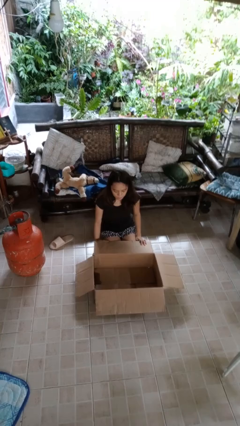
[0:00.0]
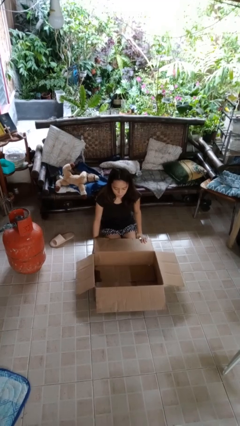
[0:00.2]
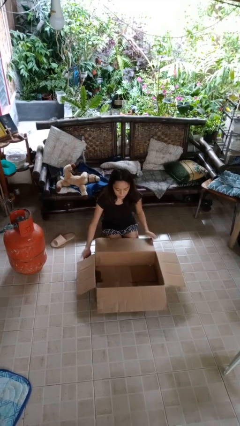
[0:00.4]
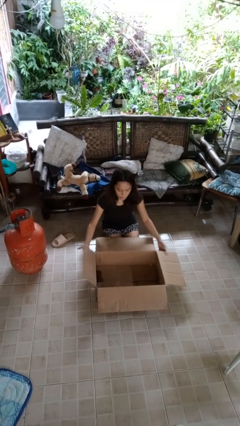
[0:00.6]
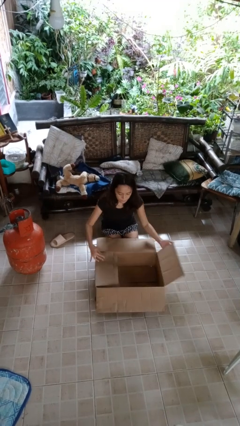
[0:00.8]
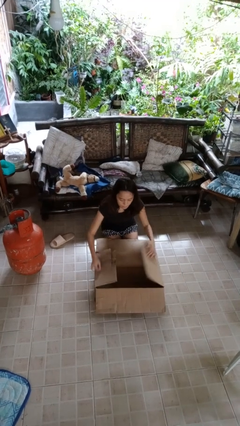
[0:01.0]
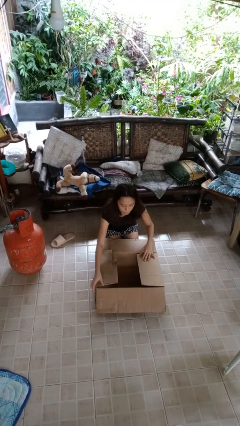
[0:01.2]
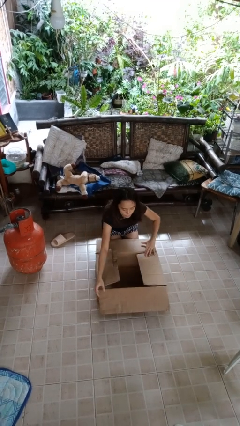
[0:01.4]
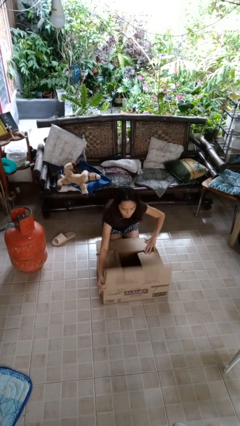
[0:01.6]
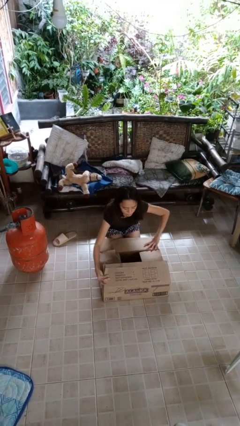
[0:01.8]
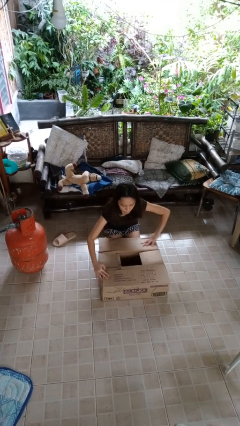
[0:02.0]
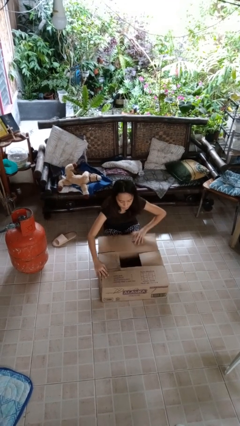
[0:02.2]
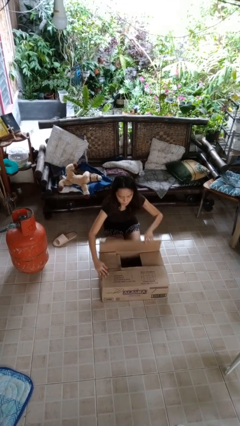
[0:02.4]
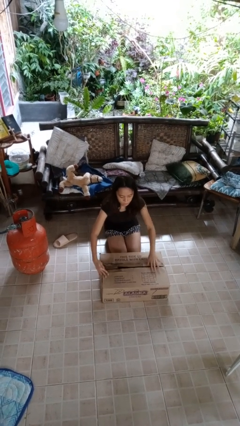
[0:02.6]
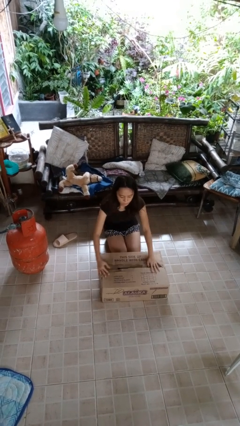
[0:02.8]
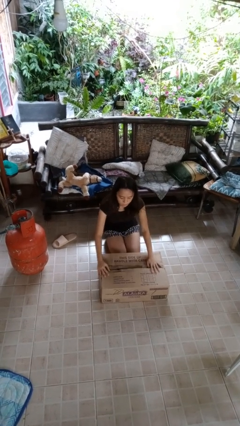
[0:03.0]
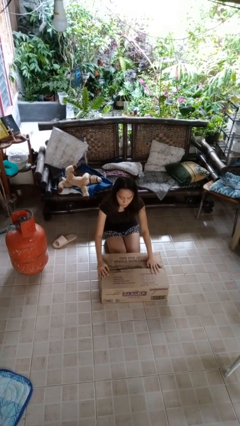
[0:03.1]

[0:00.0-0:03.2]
person closes box

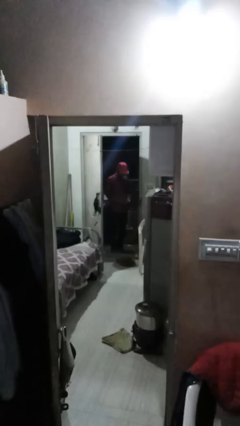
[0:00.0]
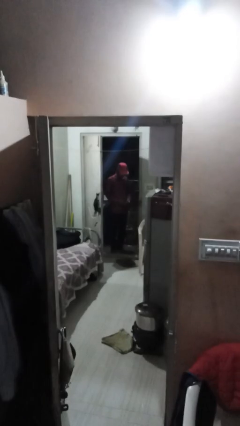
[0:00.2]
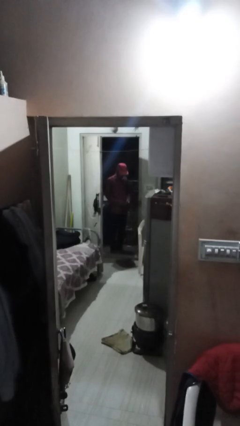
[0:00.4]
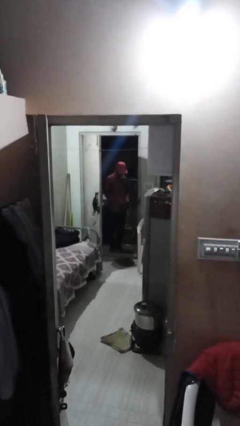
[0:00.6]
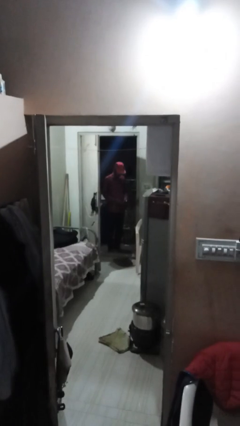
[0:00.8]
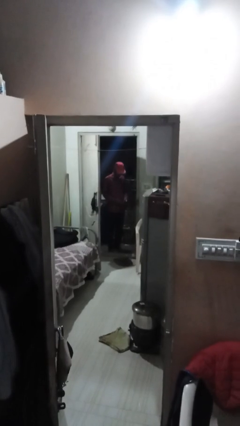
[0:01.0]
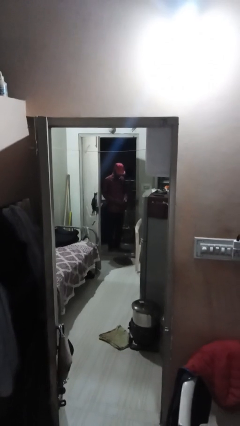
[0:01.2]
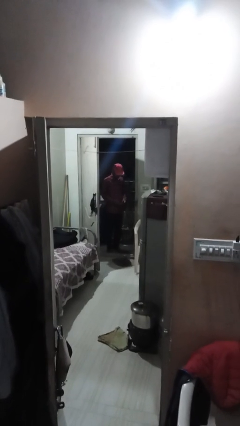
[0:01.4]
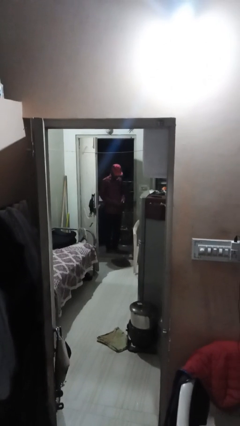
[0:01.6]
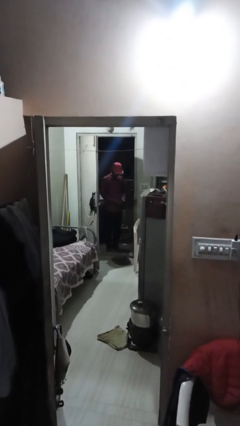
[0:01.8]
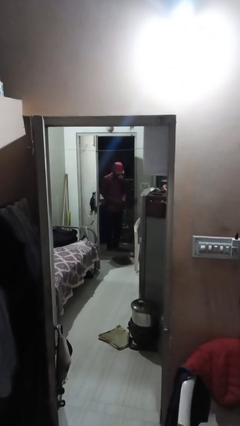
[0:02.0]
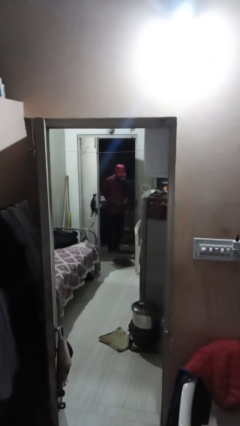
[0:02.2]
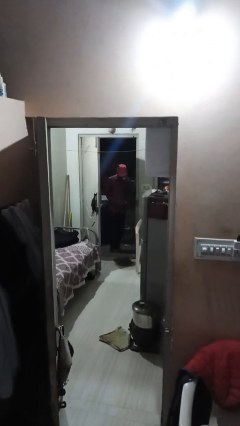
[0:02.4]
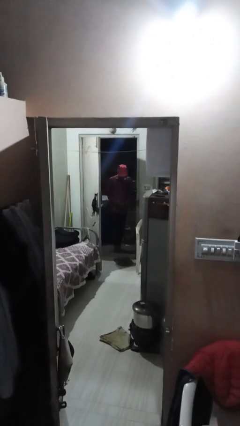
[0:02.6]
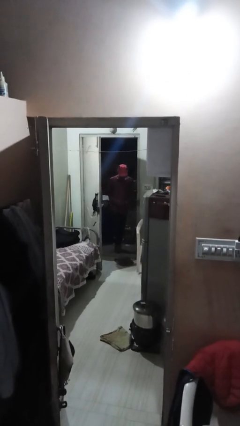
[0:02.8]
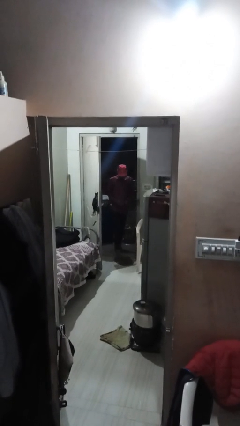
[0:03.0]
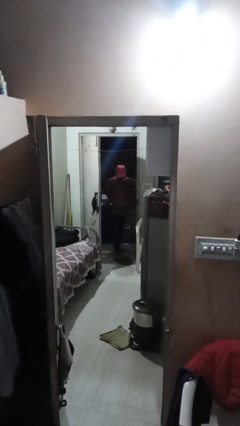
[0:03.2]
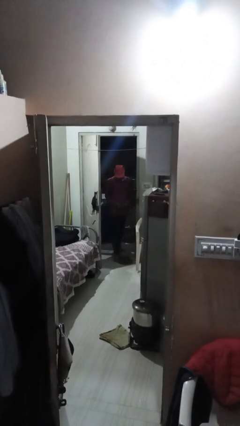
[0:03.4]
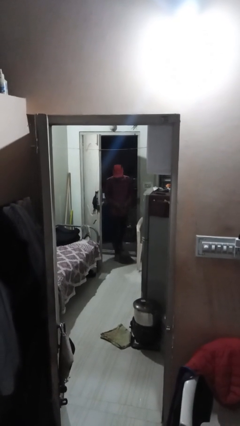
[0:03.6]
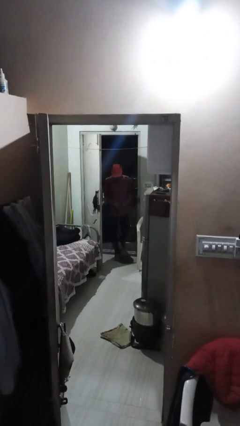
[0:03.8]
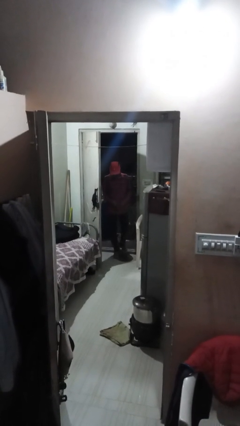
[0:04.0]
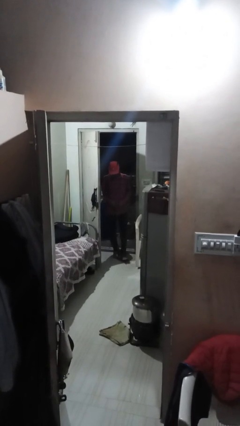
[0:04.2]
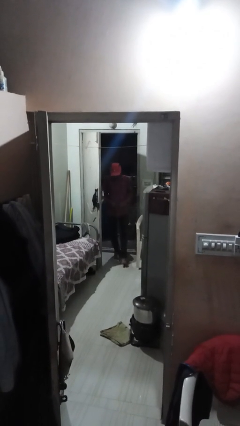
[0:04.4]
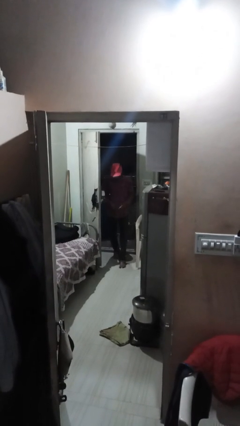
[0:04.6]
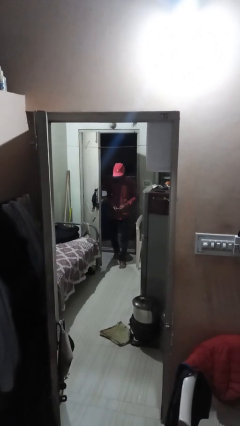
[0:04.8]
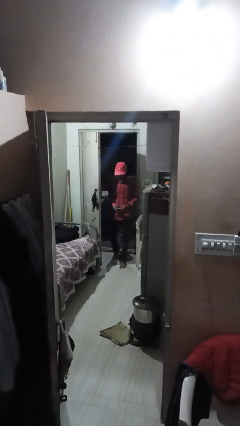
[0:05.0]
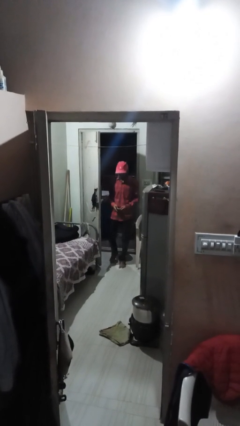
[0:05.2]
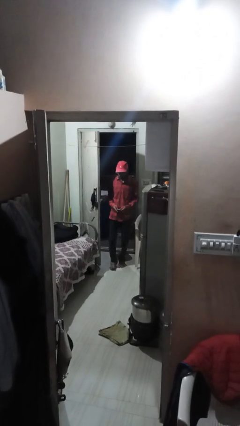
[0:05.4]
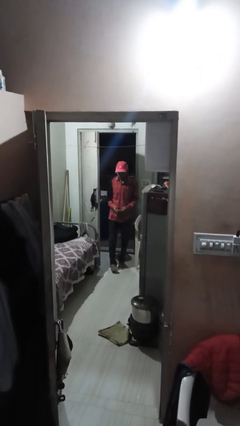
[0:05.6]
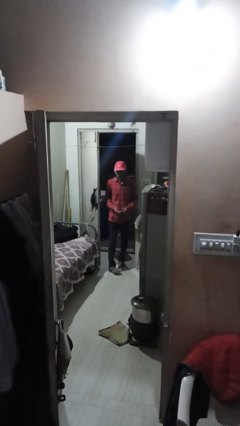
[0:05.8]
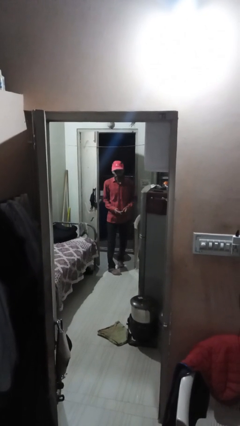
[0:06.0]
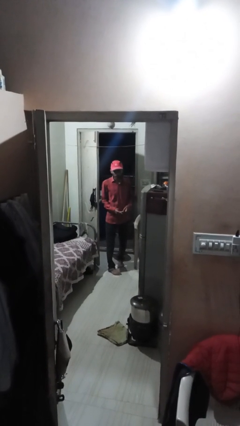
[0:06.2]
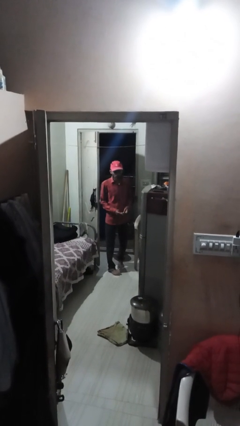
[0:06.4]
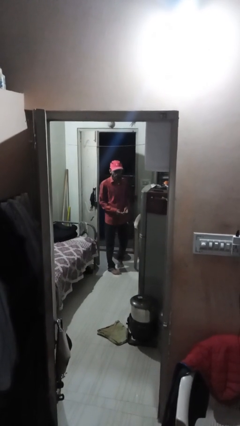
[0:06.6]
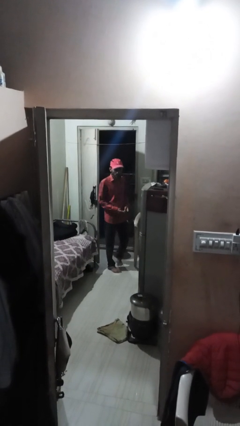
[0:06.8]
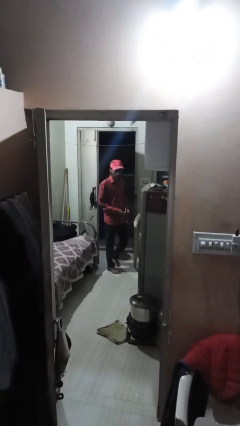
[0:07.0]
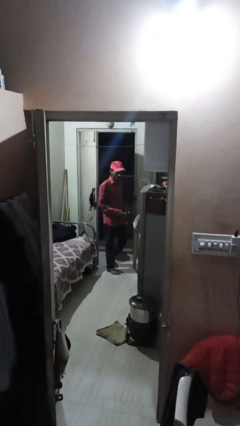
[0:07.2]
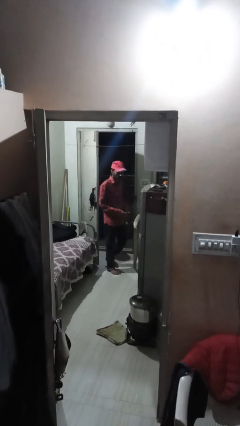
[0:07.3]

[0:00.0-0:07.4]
person enters scene through structure

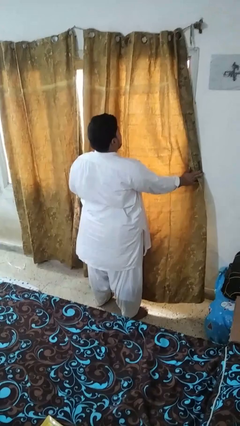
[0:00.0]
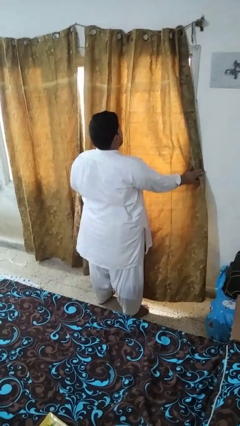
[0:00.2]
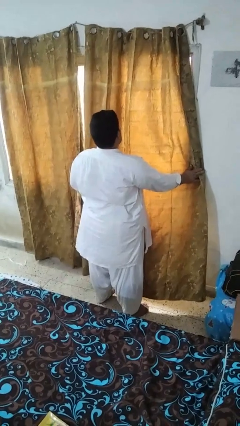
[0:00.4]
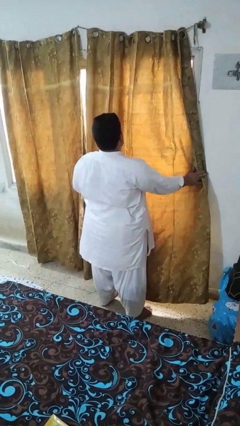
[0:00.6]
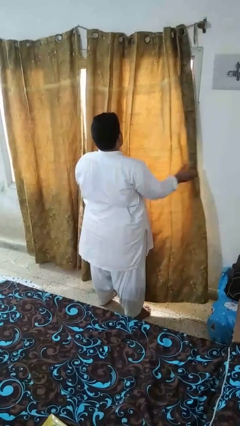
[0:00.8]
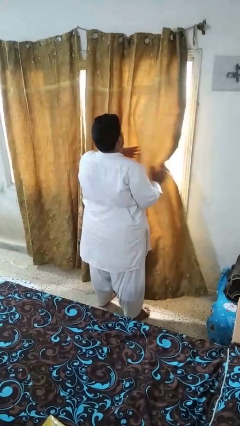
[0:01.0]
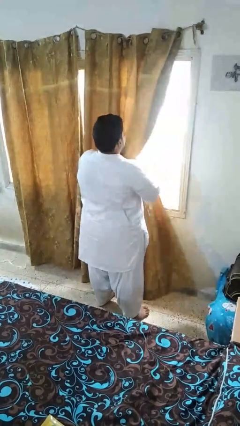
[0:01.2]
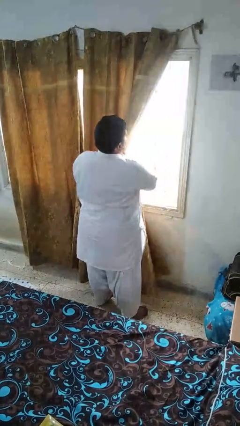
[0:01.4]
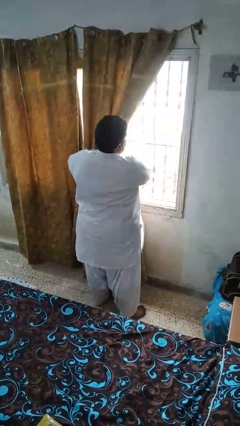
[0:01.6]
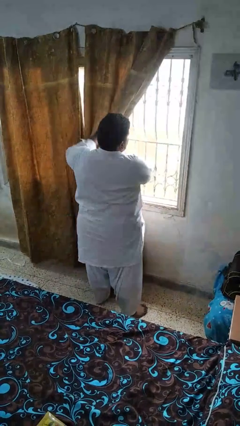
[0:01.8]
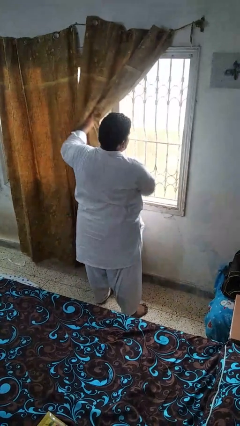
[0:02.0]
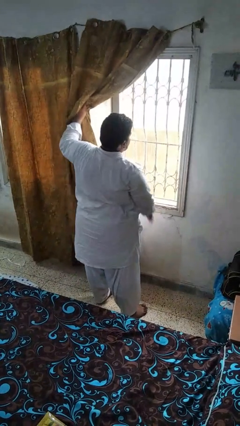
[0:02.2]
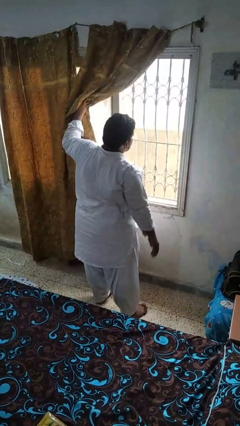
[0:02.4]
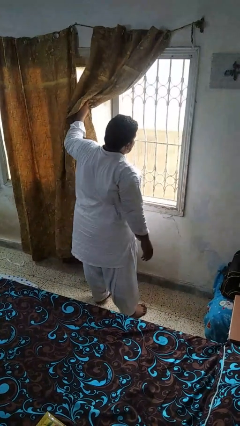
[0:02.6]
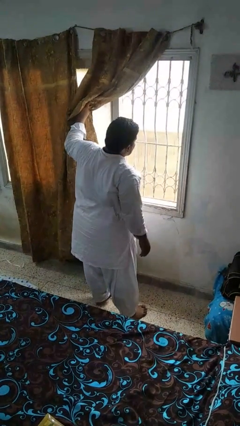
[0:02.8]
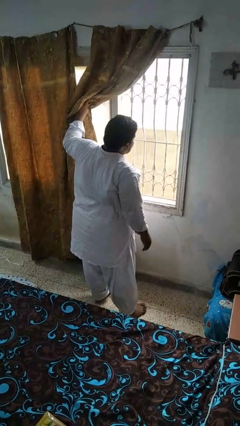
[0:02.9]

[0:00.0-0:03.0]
person opens curtains

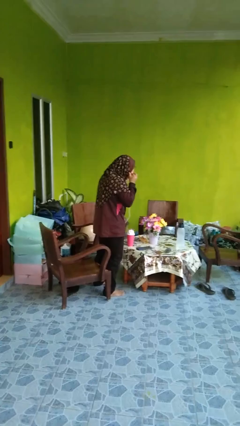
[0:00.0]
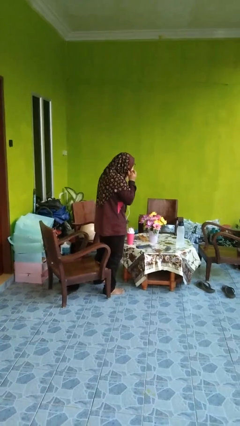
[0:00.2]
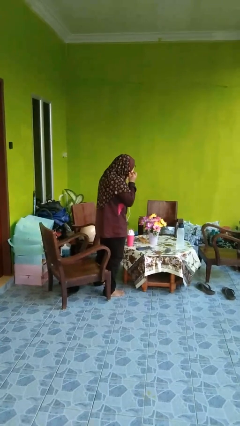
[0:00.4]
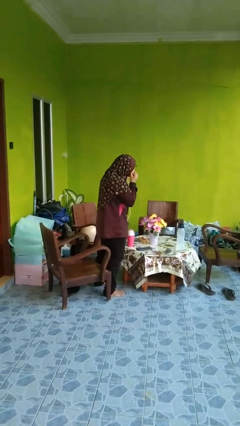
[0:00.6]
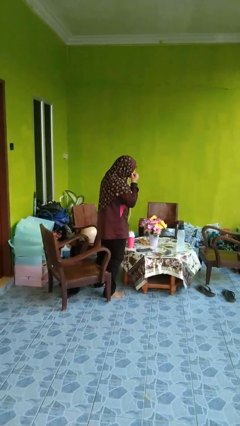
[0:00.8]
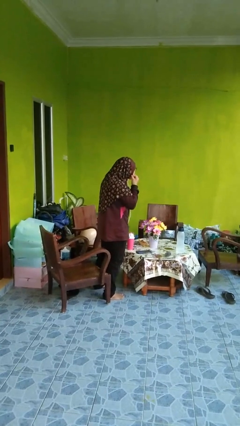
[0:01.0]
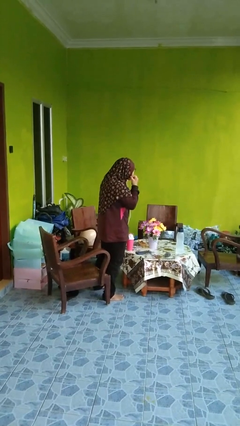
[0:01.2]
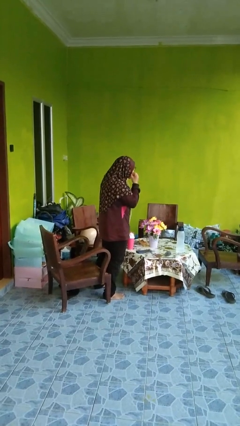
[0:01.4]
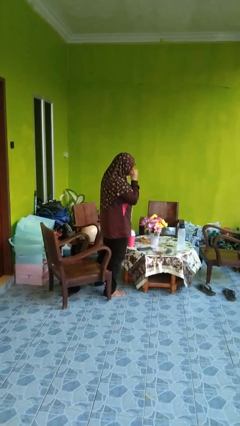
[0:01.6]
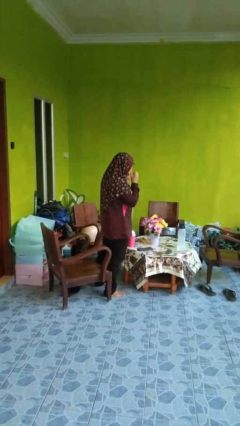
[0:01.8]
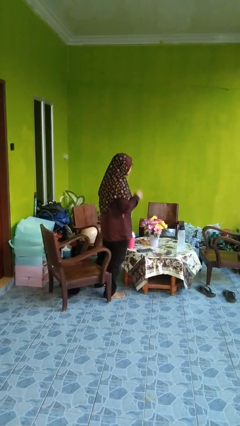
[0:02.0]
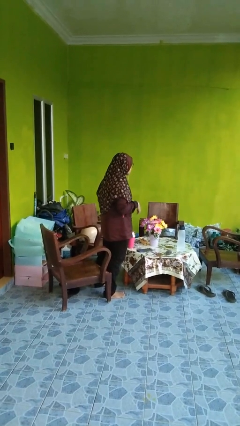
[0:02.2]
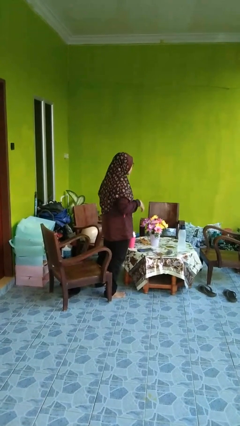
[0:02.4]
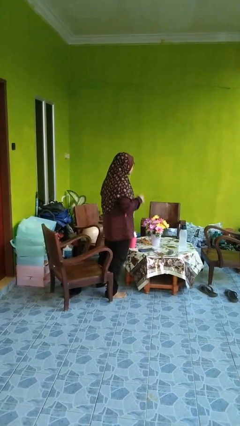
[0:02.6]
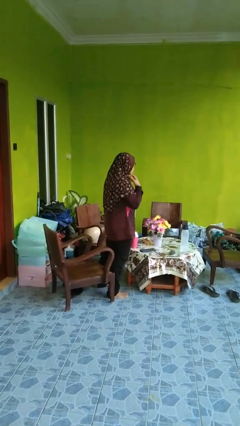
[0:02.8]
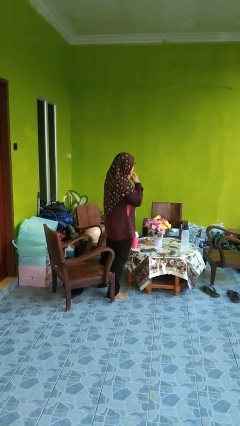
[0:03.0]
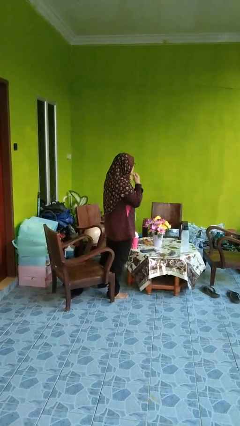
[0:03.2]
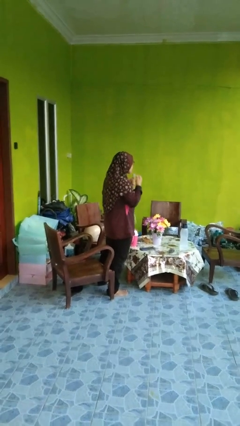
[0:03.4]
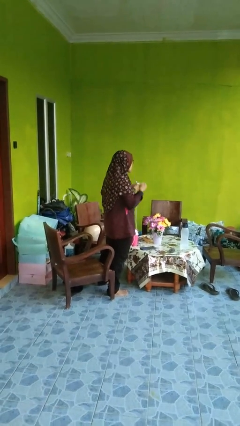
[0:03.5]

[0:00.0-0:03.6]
person puts on headphones

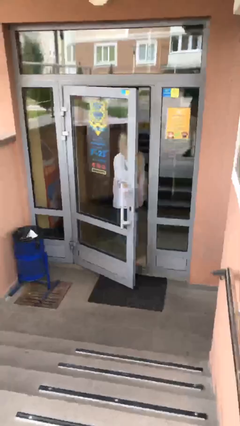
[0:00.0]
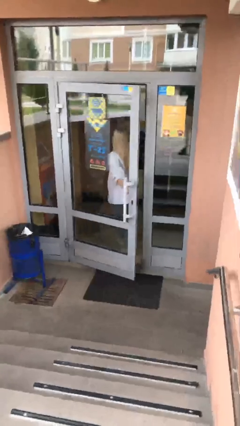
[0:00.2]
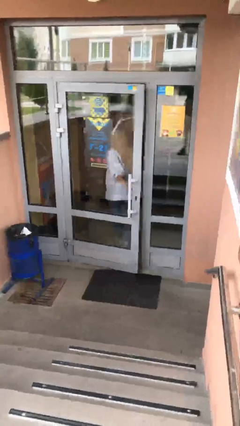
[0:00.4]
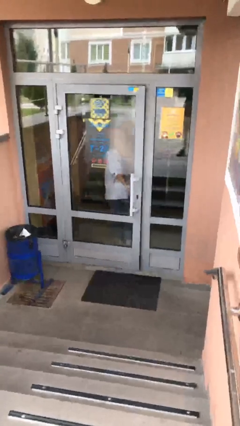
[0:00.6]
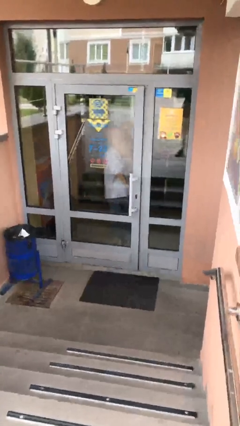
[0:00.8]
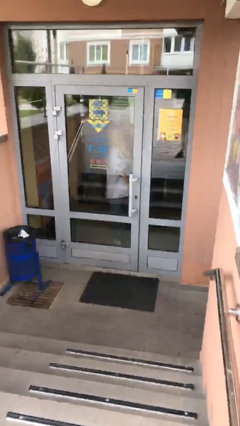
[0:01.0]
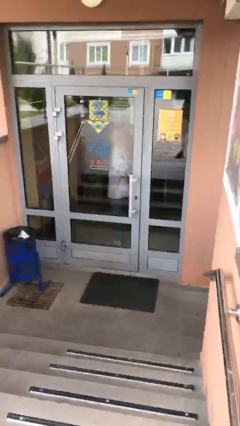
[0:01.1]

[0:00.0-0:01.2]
person closes facility door
